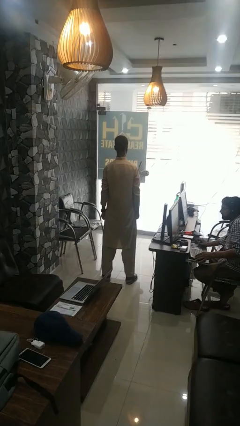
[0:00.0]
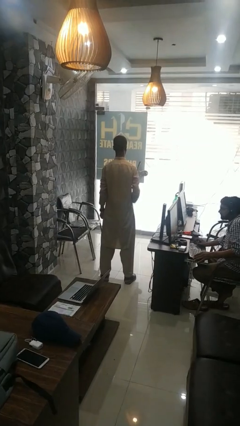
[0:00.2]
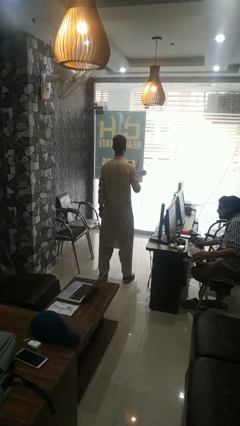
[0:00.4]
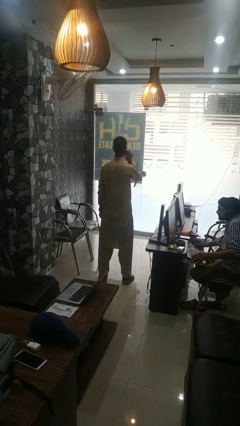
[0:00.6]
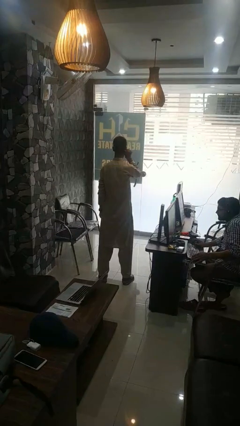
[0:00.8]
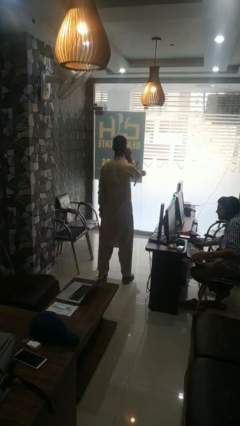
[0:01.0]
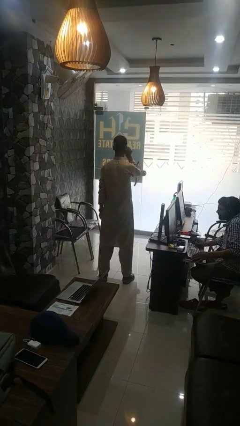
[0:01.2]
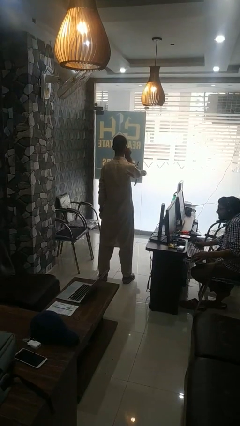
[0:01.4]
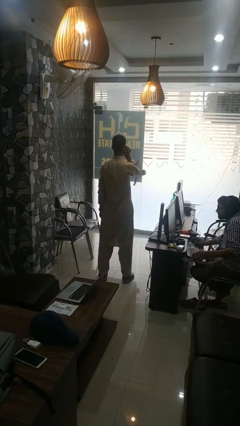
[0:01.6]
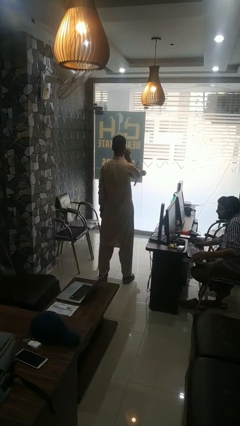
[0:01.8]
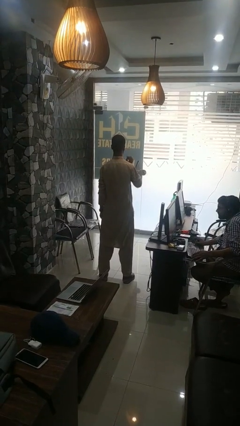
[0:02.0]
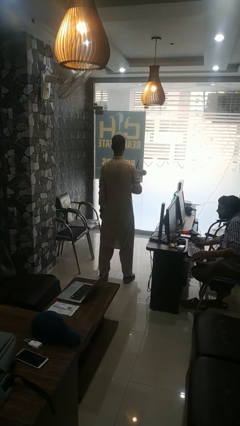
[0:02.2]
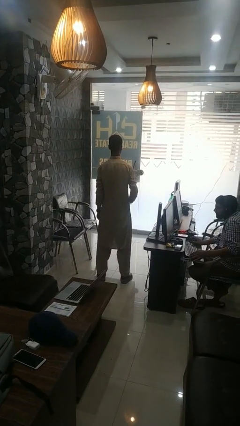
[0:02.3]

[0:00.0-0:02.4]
person touches earlobe

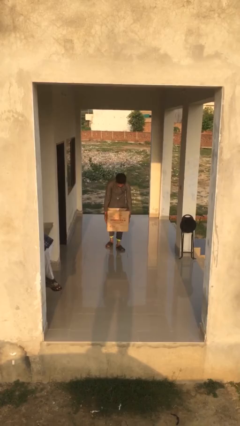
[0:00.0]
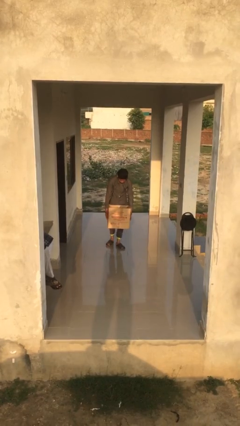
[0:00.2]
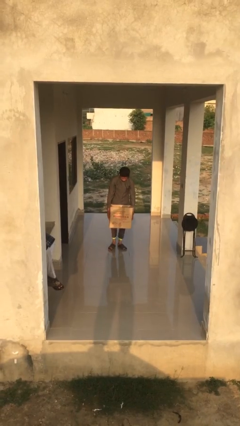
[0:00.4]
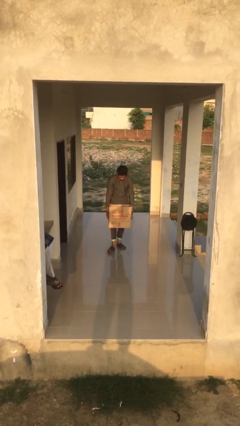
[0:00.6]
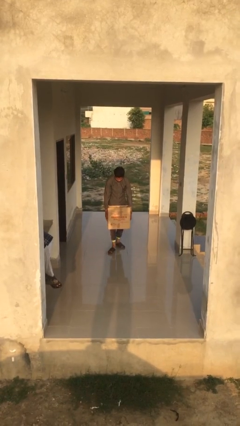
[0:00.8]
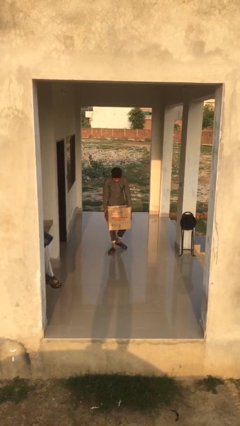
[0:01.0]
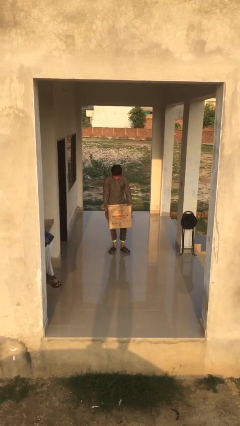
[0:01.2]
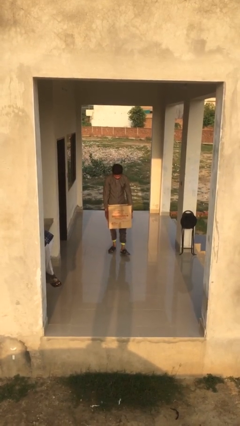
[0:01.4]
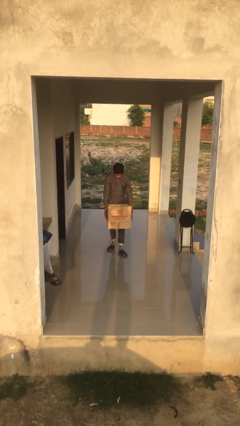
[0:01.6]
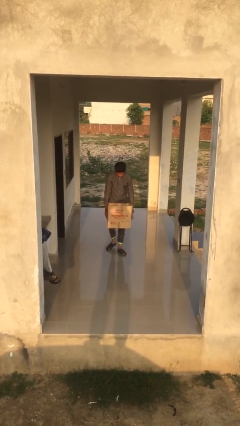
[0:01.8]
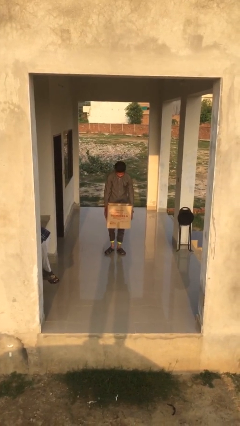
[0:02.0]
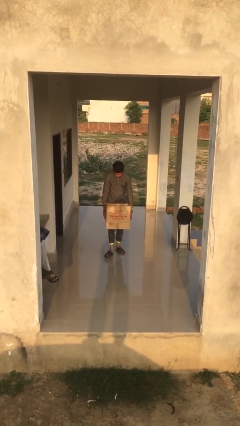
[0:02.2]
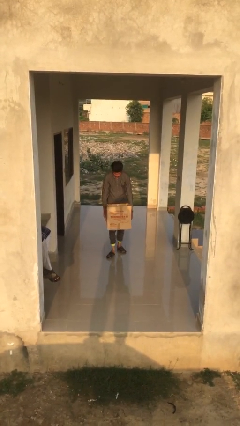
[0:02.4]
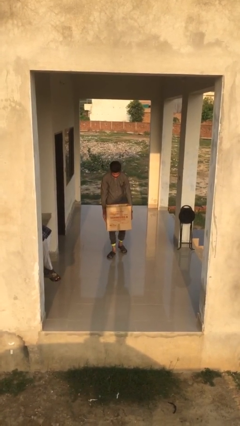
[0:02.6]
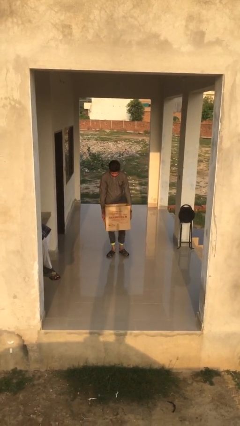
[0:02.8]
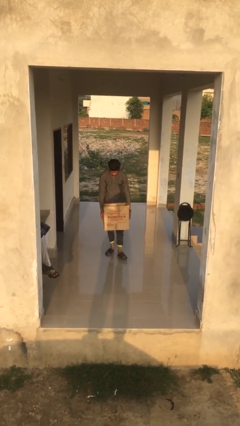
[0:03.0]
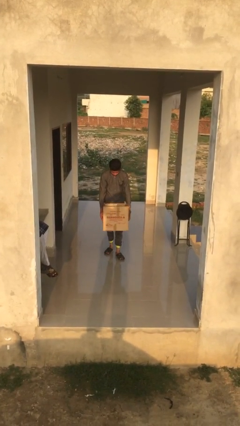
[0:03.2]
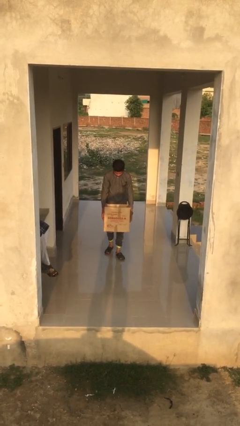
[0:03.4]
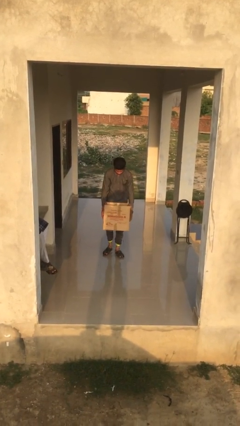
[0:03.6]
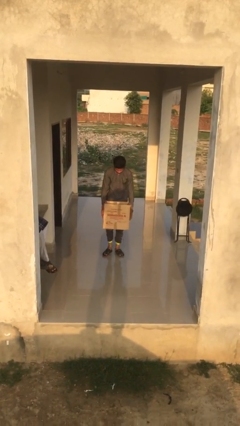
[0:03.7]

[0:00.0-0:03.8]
person carries heavy object

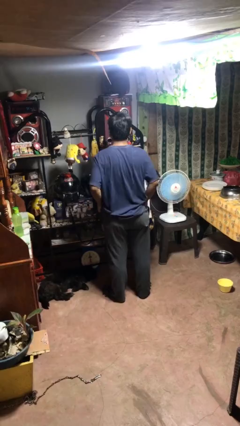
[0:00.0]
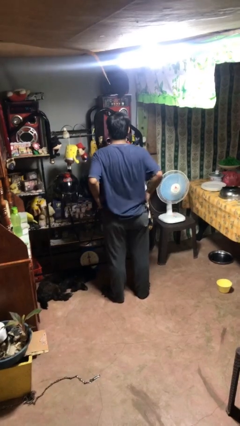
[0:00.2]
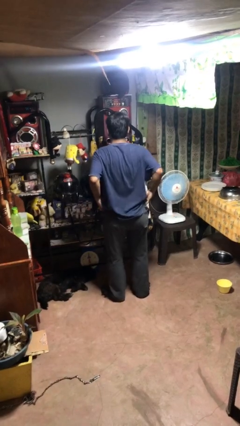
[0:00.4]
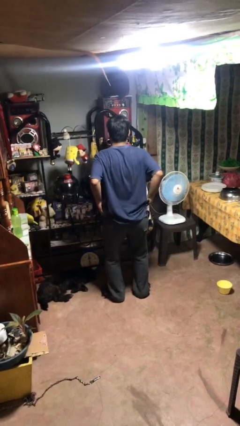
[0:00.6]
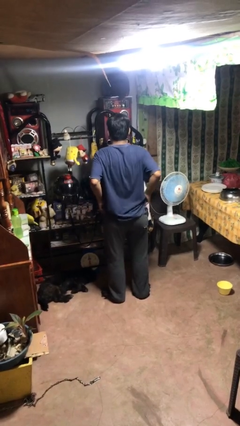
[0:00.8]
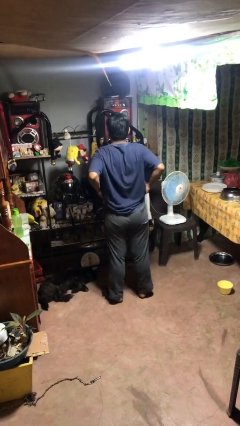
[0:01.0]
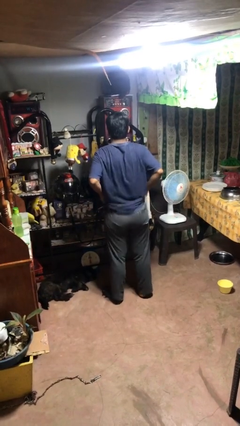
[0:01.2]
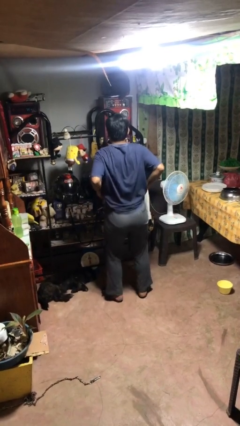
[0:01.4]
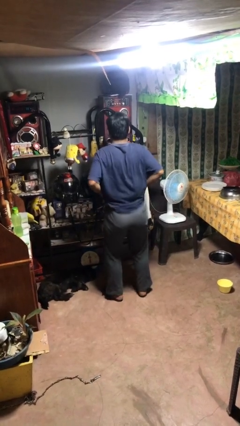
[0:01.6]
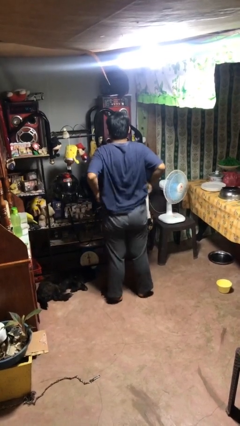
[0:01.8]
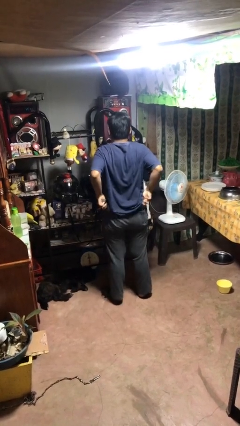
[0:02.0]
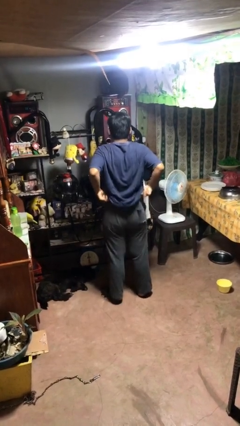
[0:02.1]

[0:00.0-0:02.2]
person hikes up pants

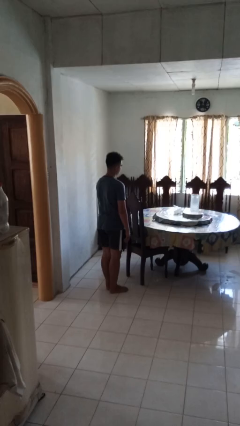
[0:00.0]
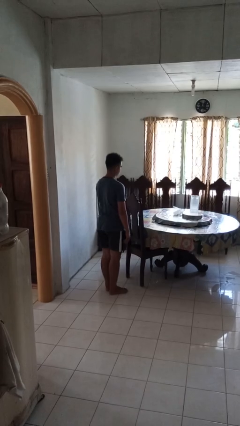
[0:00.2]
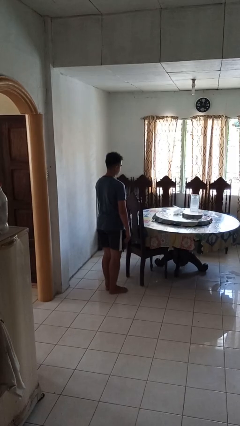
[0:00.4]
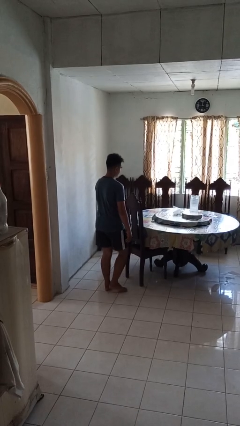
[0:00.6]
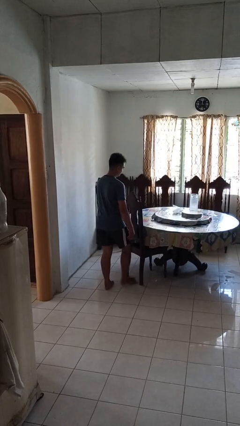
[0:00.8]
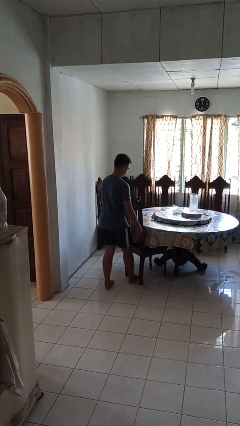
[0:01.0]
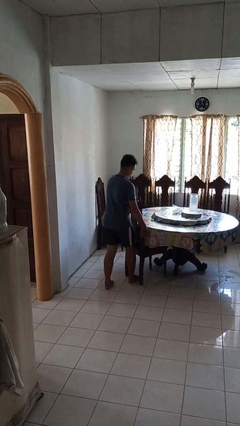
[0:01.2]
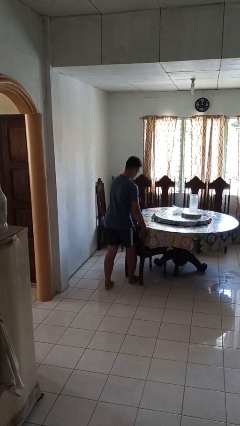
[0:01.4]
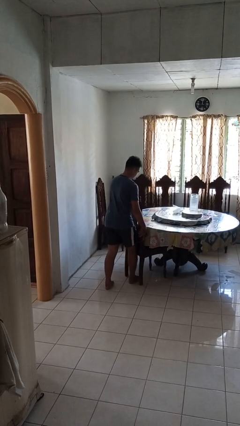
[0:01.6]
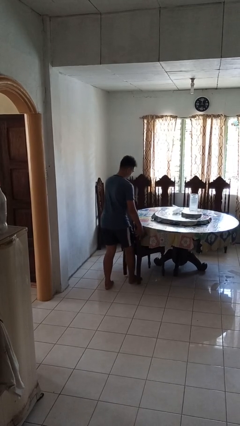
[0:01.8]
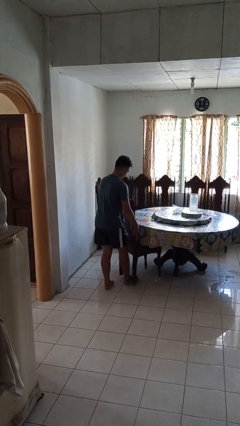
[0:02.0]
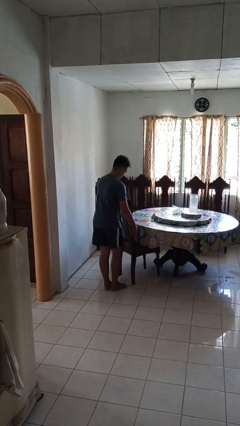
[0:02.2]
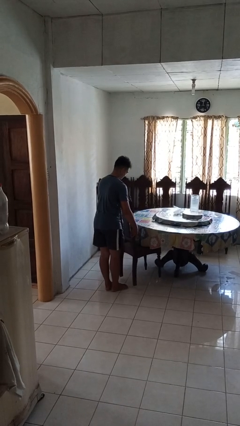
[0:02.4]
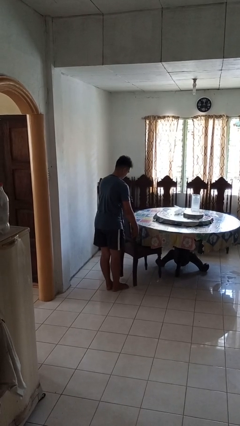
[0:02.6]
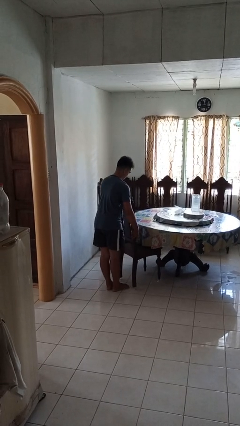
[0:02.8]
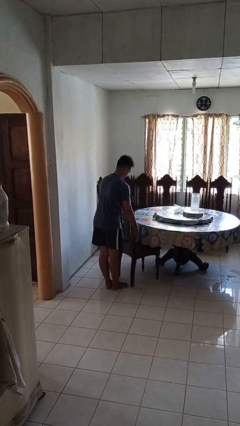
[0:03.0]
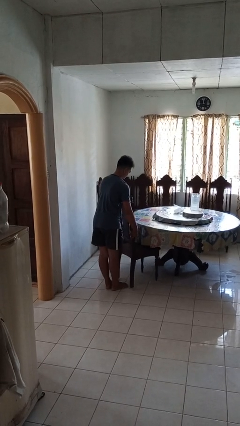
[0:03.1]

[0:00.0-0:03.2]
person pulls out chair

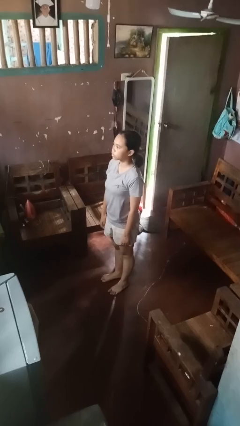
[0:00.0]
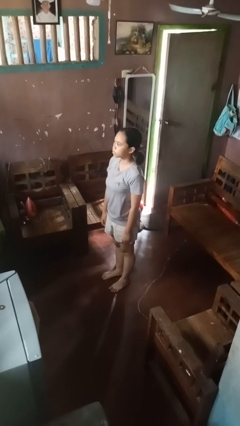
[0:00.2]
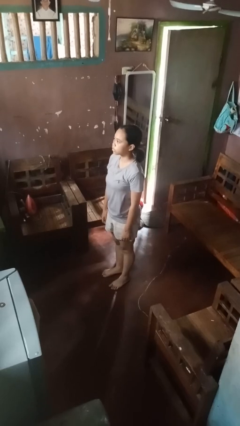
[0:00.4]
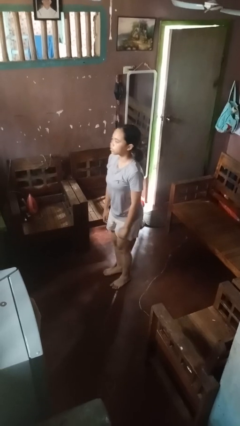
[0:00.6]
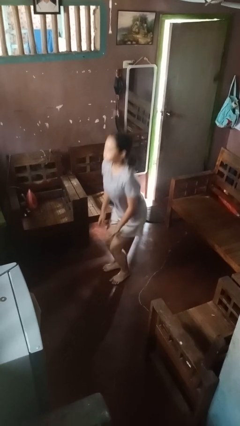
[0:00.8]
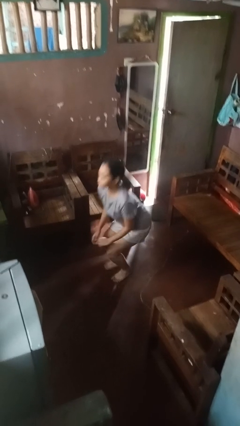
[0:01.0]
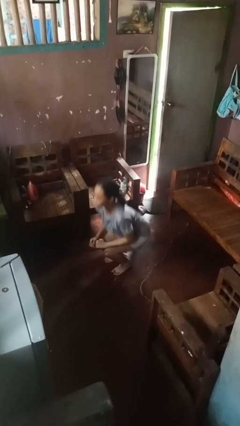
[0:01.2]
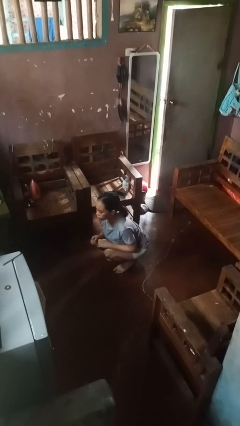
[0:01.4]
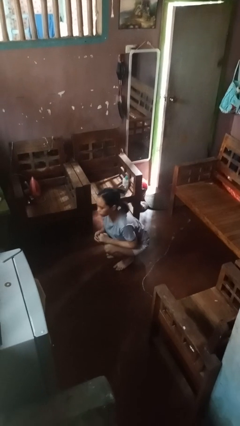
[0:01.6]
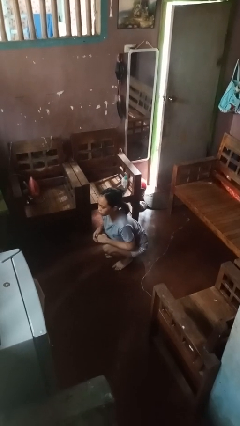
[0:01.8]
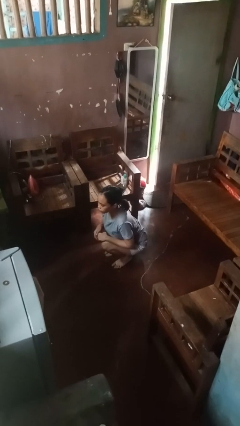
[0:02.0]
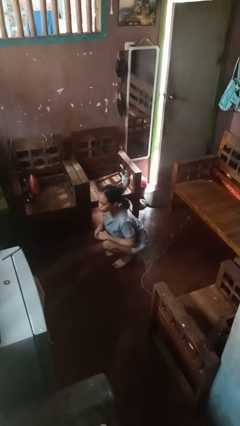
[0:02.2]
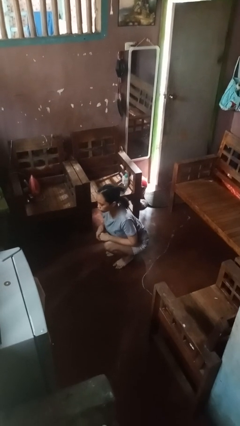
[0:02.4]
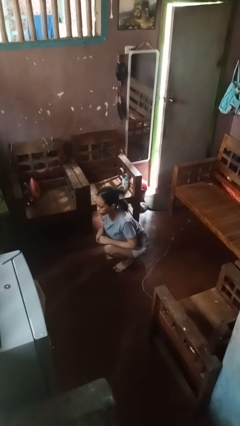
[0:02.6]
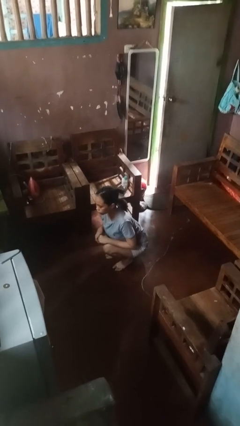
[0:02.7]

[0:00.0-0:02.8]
person squats

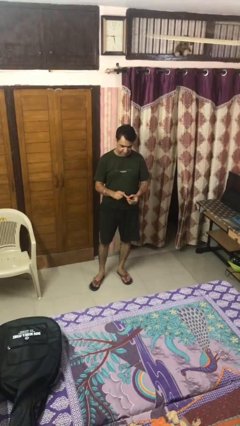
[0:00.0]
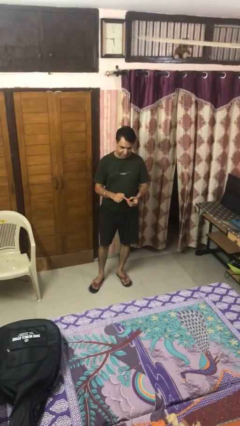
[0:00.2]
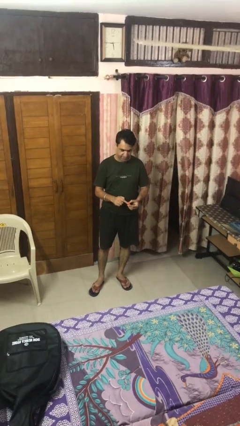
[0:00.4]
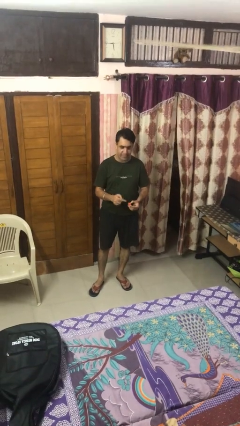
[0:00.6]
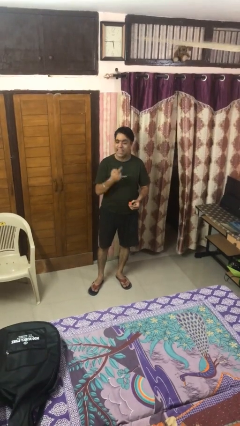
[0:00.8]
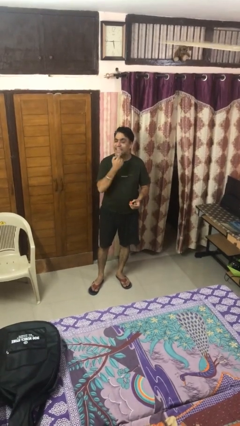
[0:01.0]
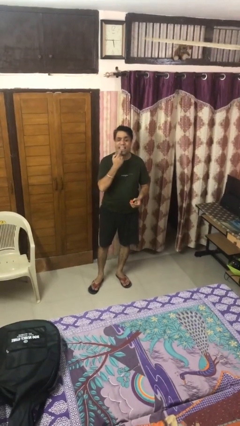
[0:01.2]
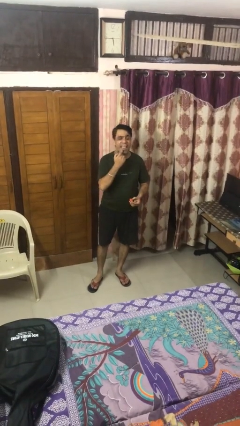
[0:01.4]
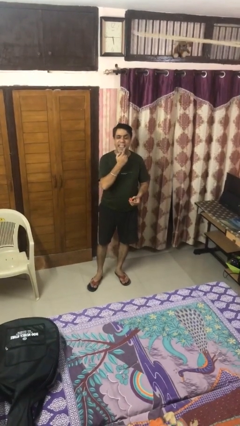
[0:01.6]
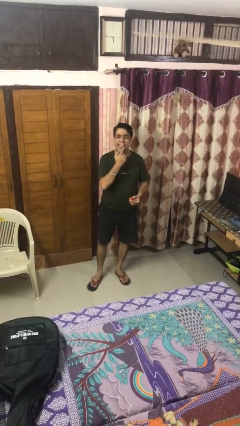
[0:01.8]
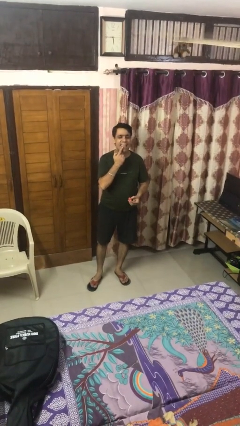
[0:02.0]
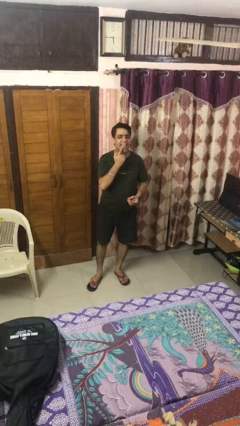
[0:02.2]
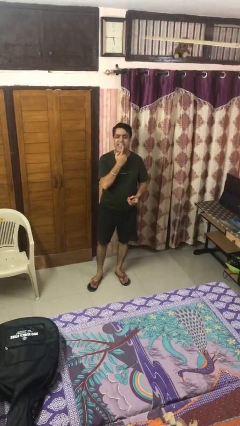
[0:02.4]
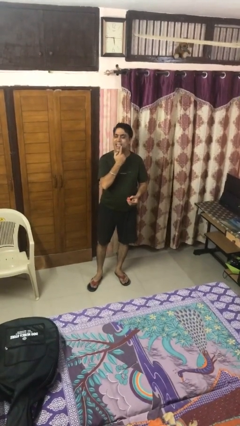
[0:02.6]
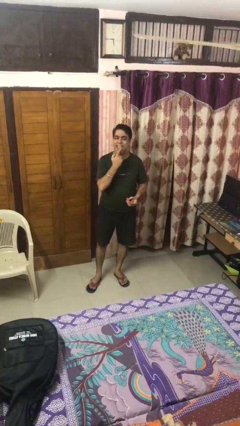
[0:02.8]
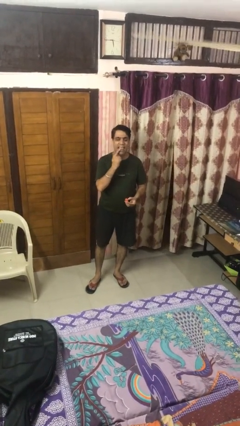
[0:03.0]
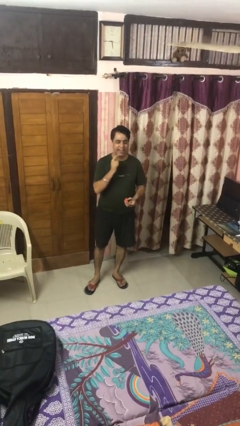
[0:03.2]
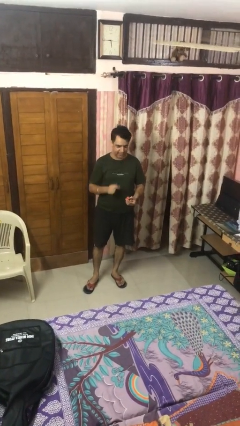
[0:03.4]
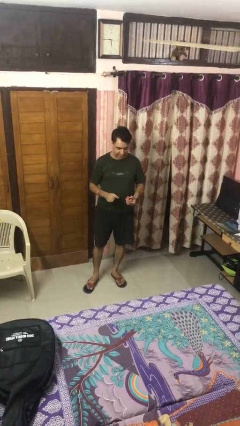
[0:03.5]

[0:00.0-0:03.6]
person applies lip makeup
